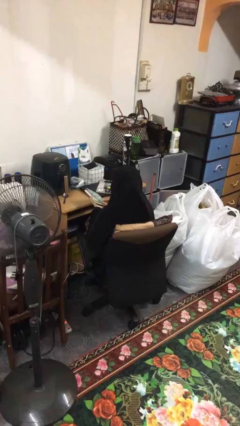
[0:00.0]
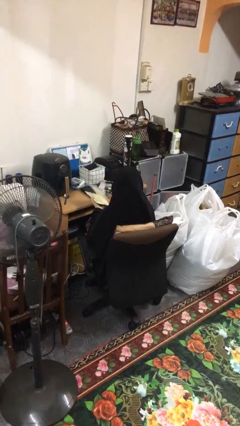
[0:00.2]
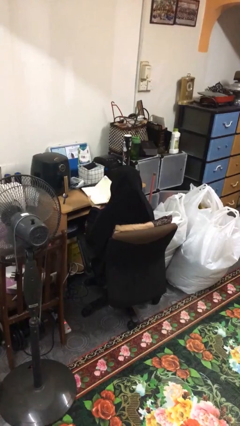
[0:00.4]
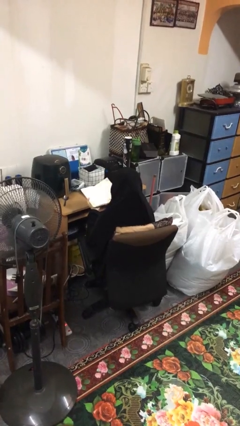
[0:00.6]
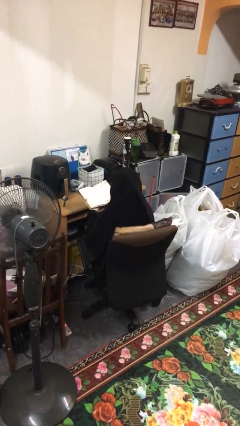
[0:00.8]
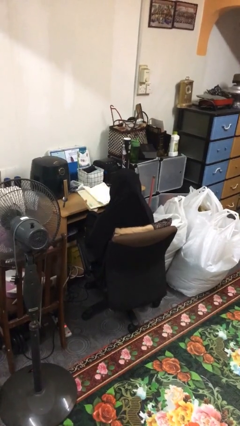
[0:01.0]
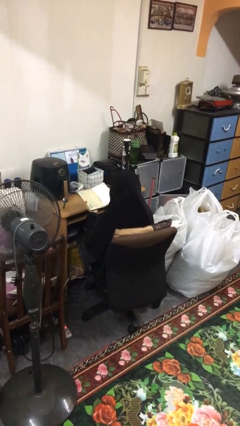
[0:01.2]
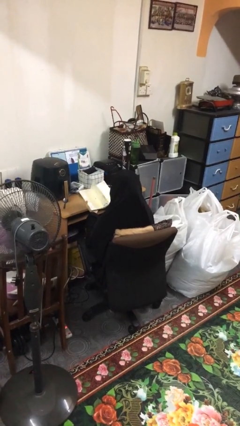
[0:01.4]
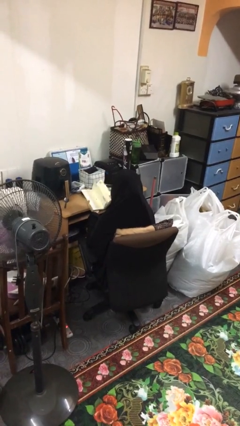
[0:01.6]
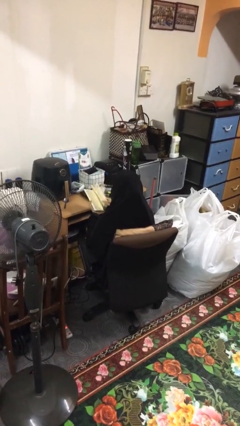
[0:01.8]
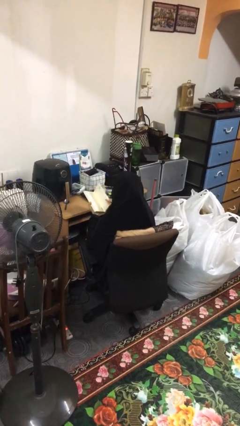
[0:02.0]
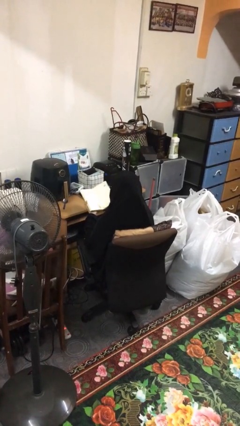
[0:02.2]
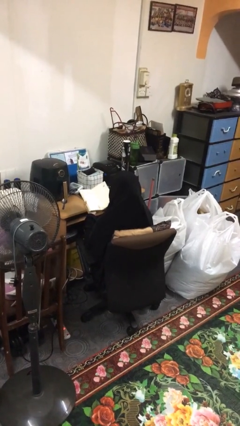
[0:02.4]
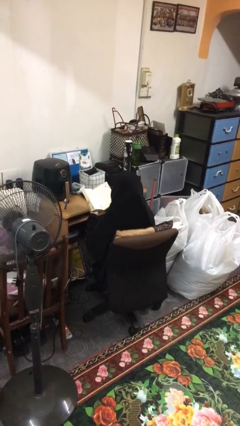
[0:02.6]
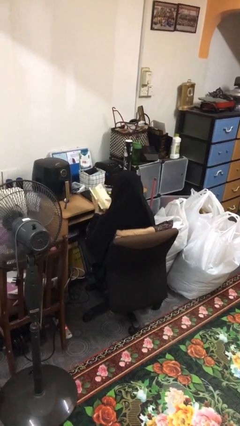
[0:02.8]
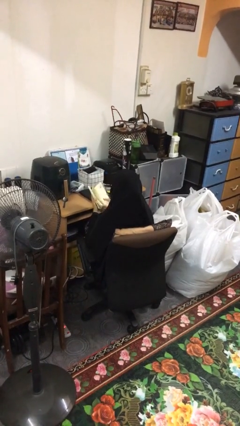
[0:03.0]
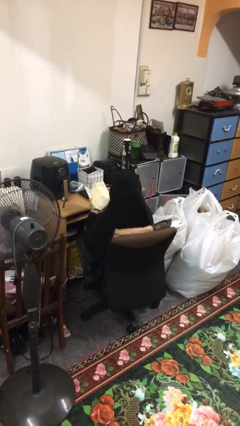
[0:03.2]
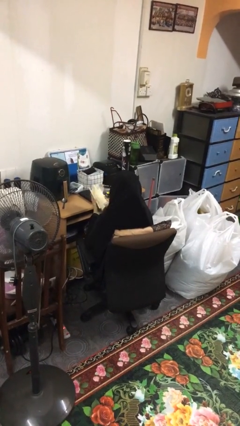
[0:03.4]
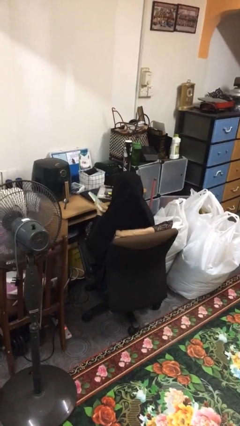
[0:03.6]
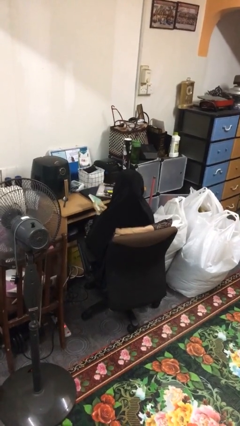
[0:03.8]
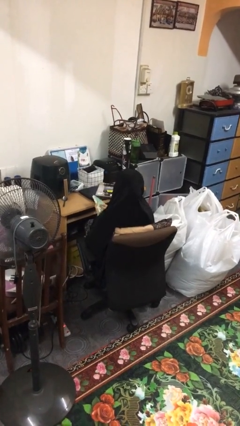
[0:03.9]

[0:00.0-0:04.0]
person reads book

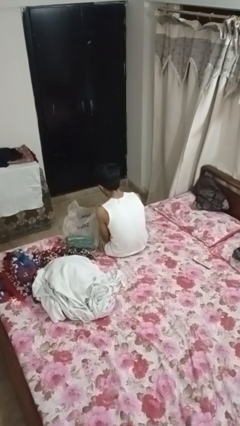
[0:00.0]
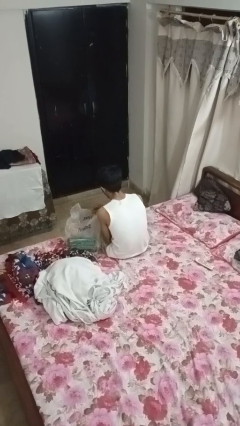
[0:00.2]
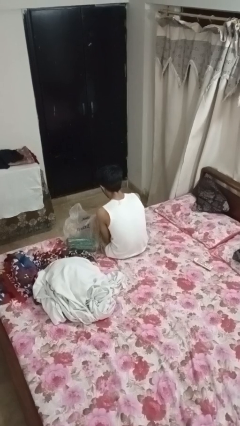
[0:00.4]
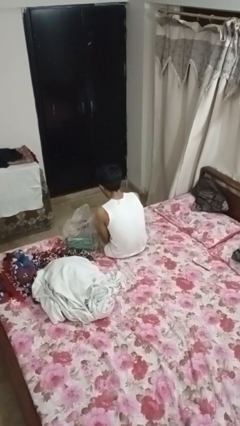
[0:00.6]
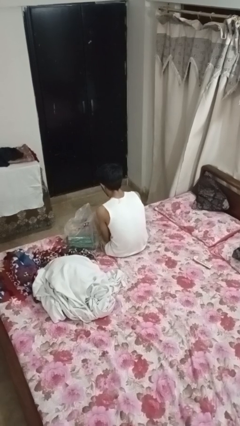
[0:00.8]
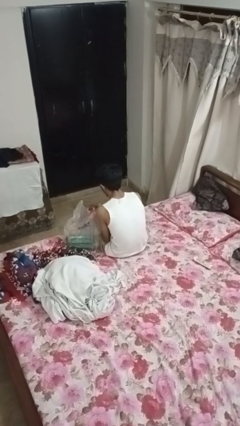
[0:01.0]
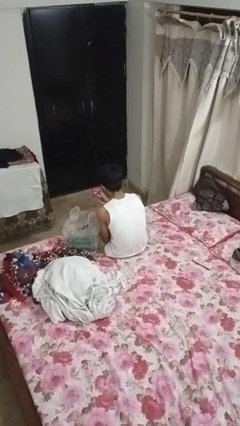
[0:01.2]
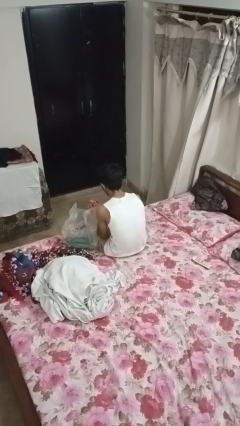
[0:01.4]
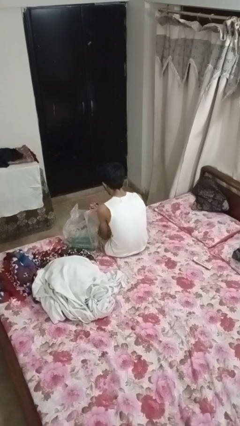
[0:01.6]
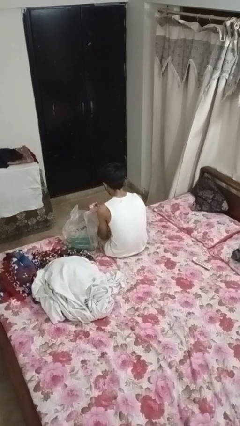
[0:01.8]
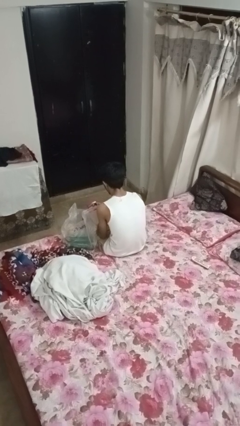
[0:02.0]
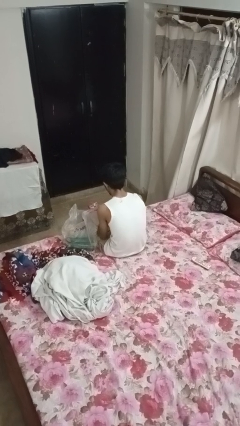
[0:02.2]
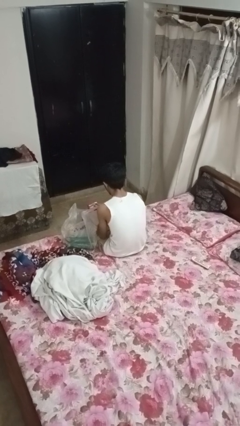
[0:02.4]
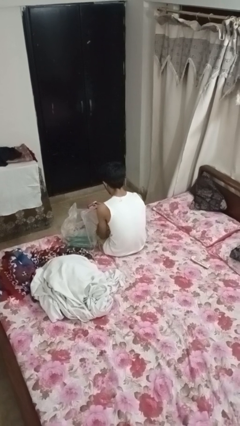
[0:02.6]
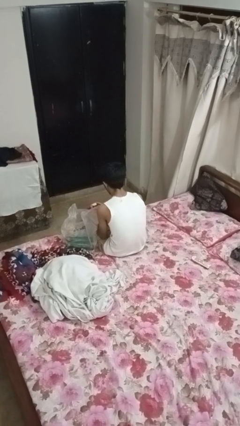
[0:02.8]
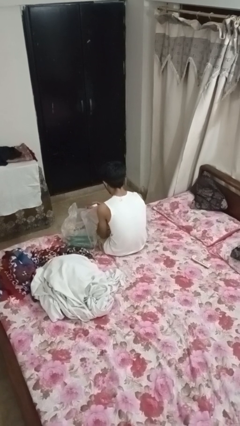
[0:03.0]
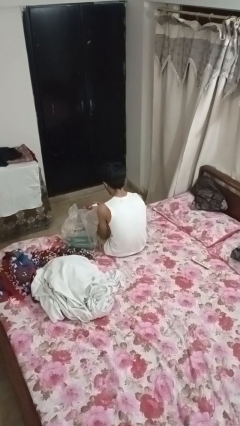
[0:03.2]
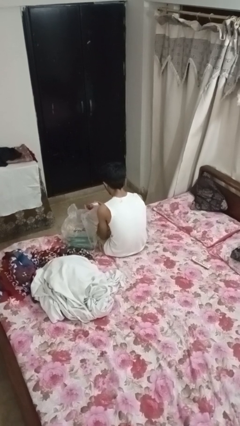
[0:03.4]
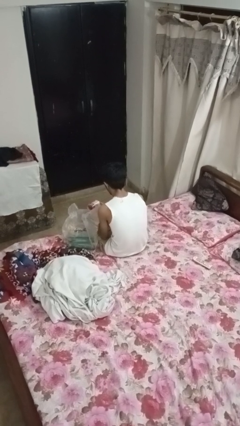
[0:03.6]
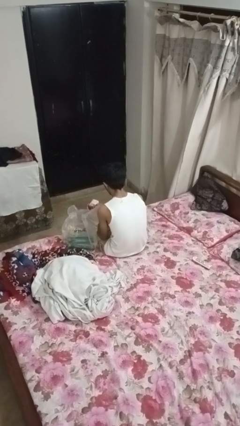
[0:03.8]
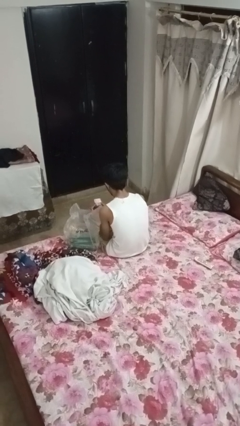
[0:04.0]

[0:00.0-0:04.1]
person takes object from bag

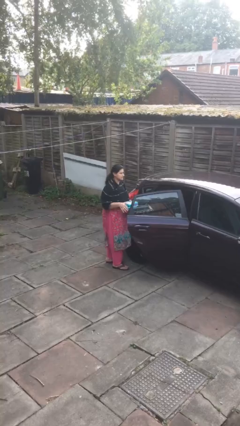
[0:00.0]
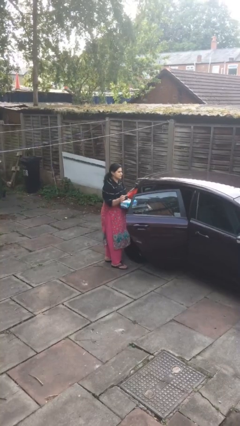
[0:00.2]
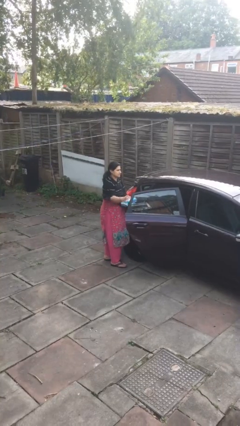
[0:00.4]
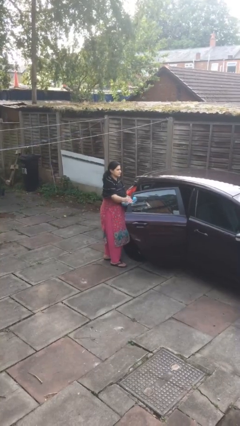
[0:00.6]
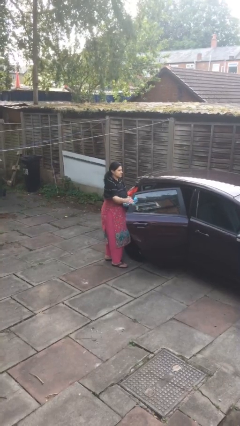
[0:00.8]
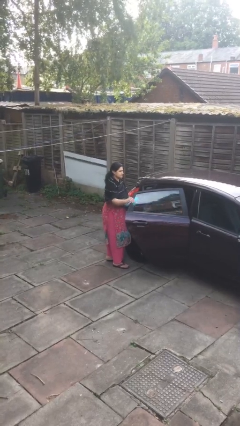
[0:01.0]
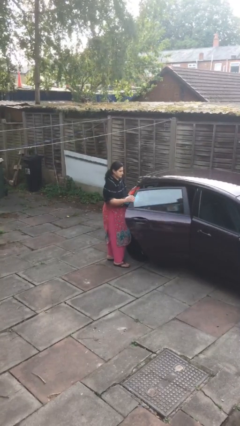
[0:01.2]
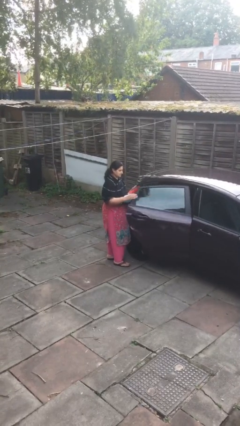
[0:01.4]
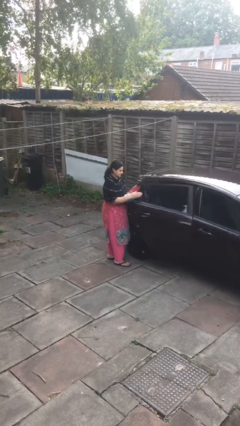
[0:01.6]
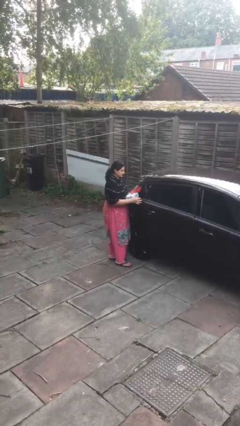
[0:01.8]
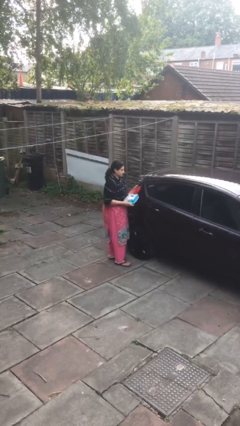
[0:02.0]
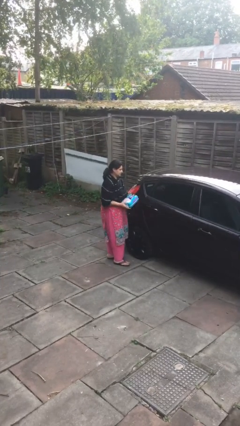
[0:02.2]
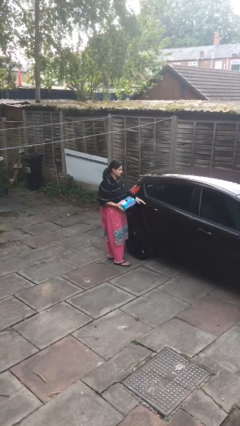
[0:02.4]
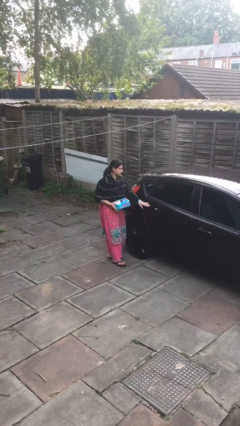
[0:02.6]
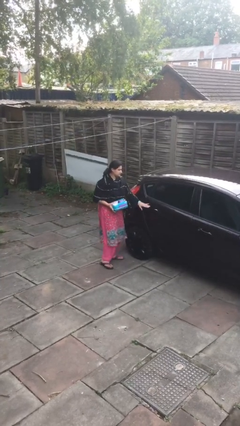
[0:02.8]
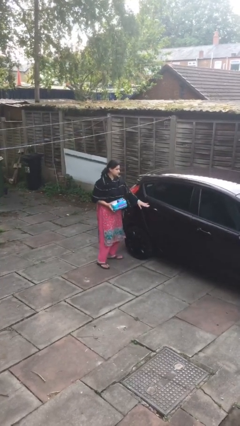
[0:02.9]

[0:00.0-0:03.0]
person closes car door

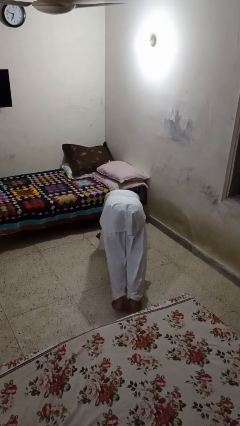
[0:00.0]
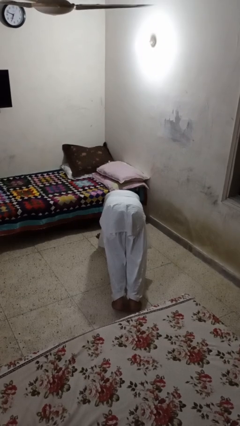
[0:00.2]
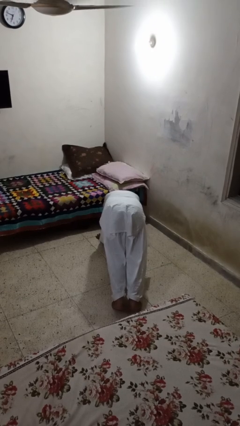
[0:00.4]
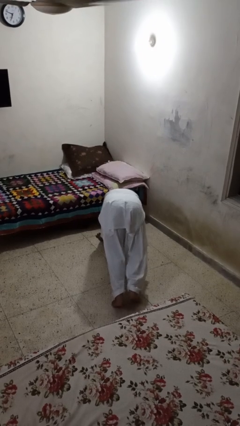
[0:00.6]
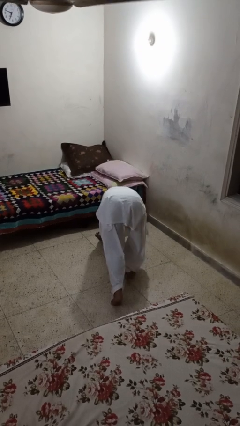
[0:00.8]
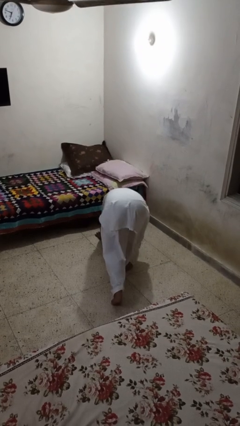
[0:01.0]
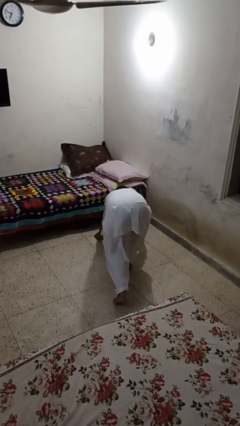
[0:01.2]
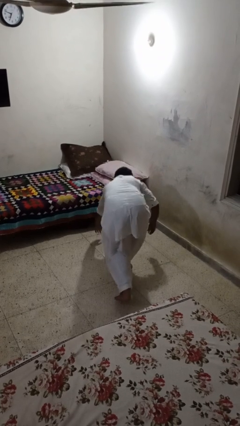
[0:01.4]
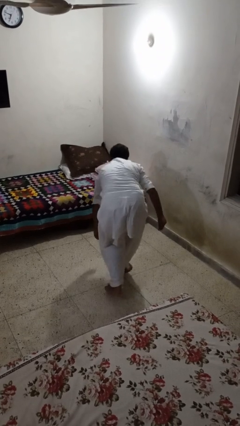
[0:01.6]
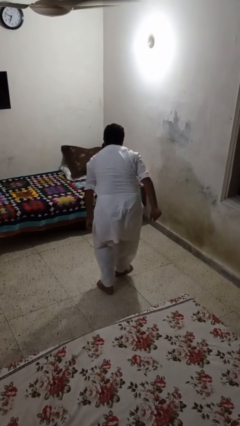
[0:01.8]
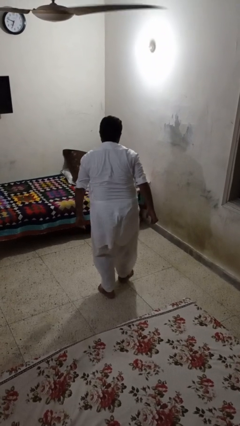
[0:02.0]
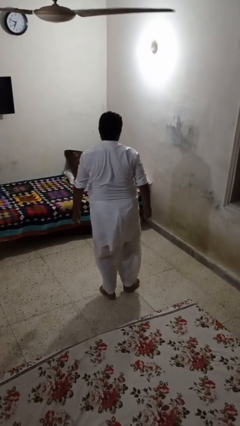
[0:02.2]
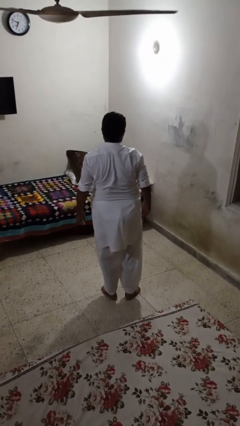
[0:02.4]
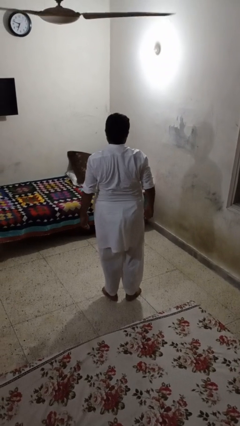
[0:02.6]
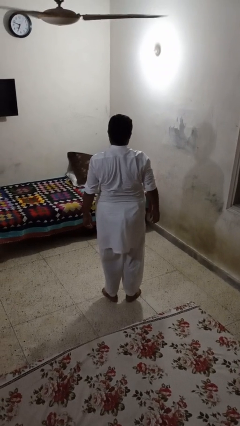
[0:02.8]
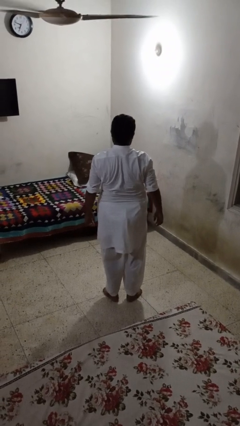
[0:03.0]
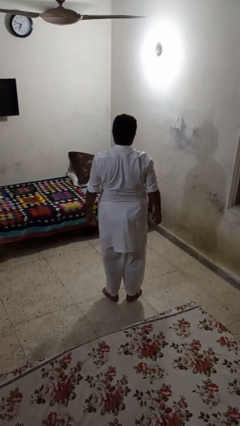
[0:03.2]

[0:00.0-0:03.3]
person stands up from floor

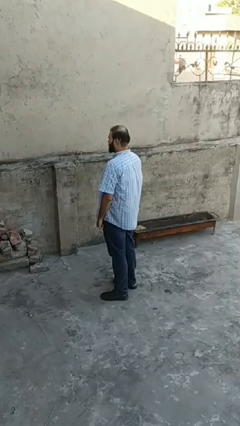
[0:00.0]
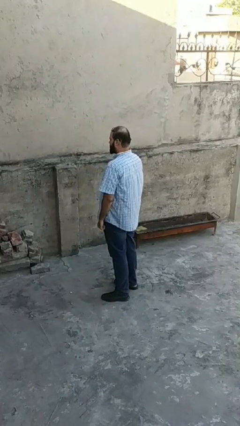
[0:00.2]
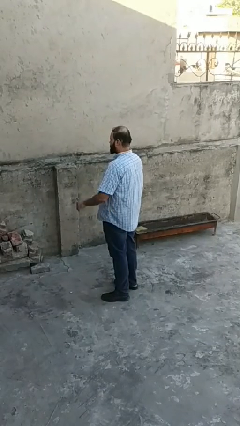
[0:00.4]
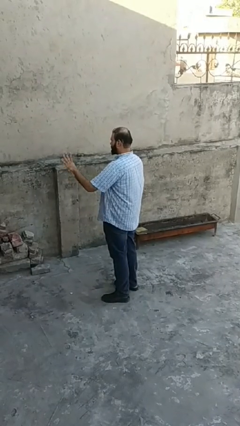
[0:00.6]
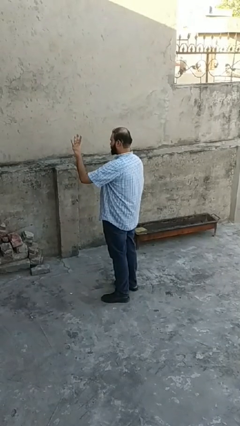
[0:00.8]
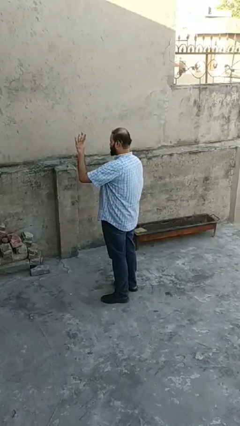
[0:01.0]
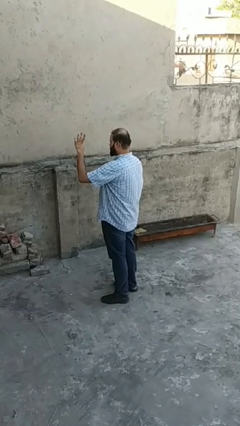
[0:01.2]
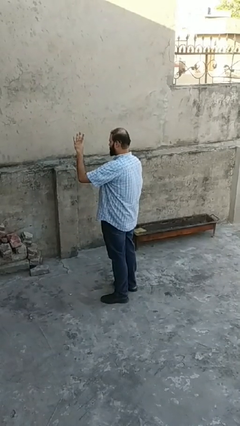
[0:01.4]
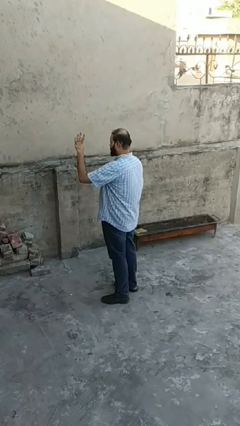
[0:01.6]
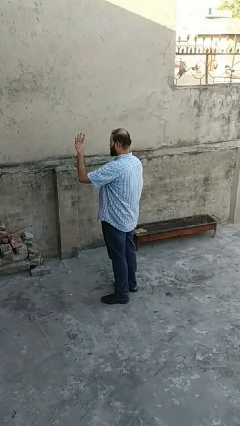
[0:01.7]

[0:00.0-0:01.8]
person gestures number four

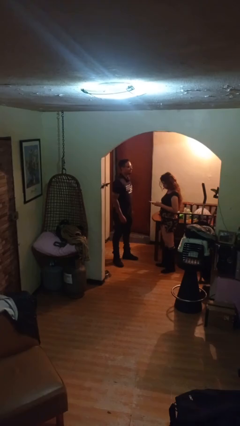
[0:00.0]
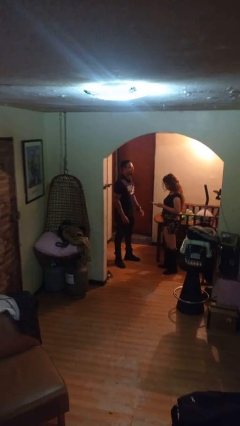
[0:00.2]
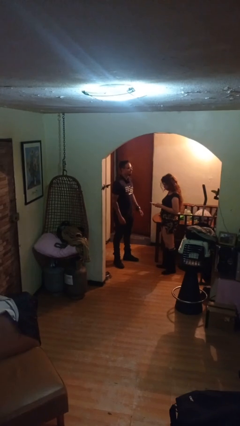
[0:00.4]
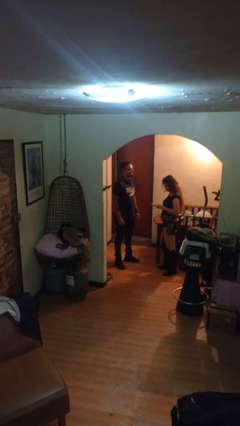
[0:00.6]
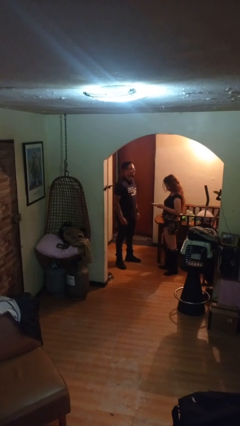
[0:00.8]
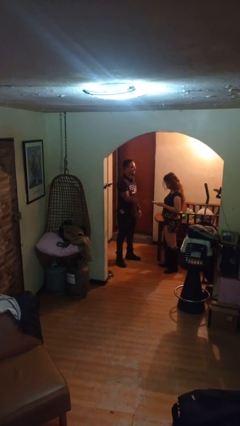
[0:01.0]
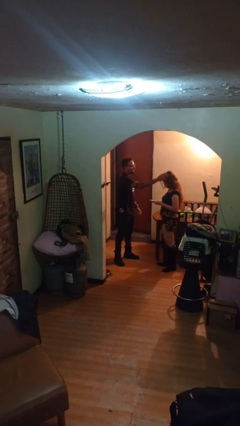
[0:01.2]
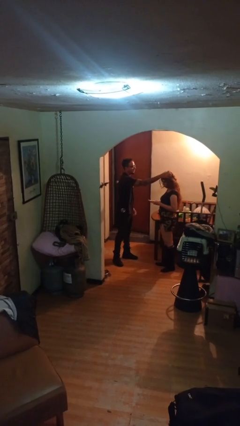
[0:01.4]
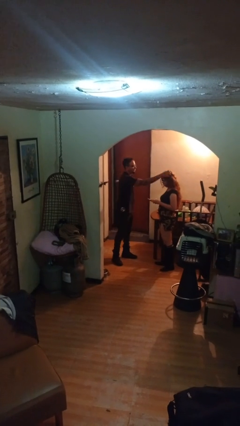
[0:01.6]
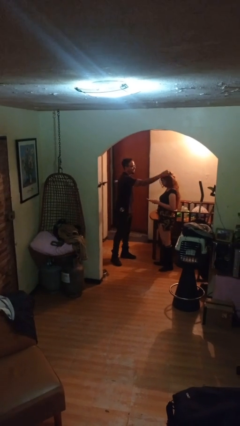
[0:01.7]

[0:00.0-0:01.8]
person puts down object on table
